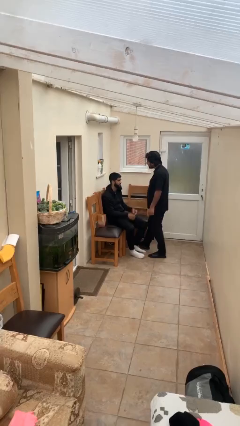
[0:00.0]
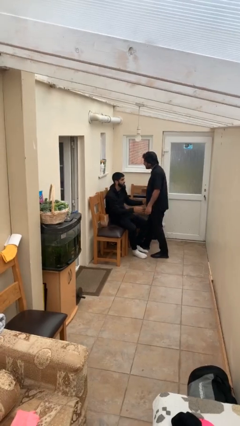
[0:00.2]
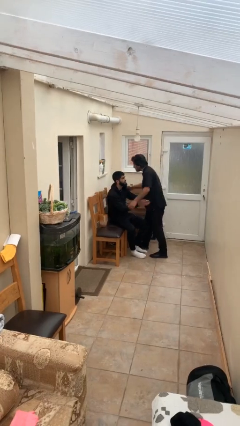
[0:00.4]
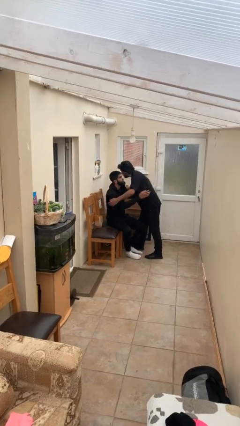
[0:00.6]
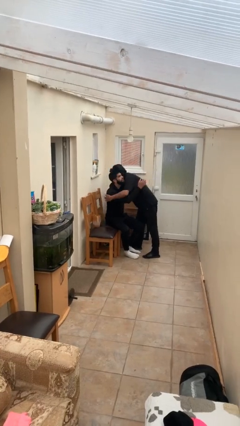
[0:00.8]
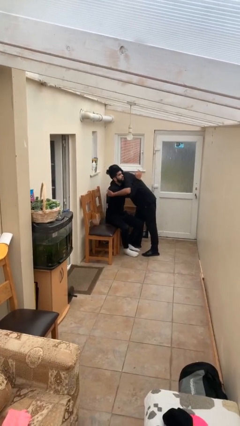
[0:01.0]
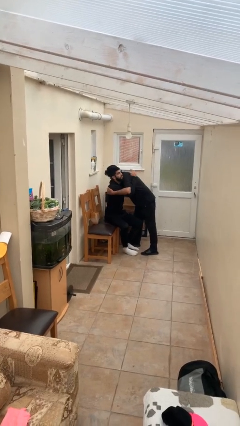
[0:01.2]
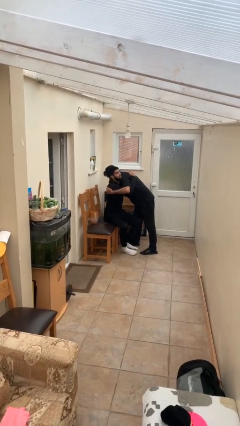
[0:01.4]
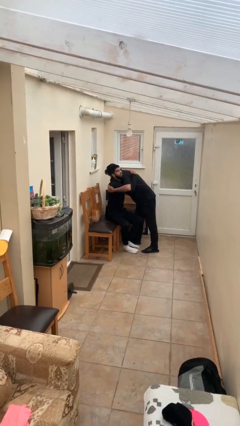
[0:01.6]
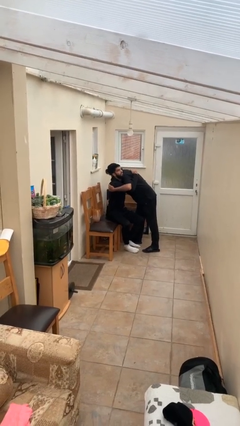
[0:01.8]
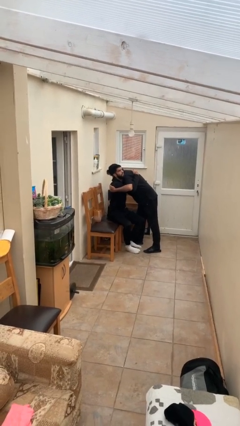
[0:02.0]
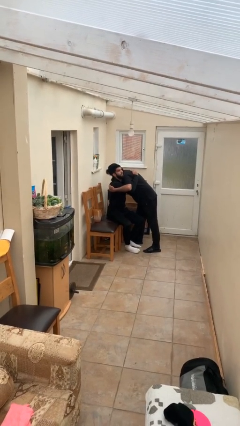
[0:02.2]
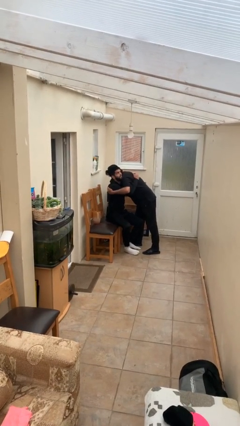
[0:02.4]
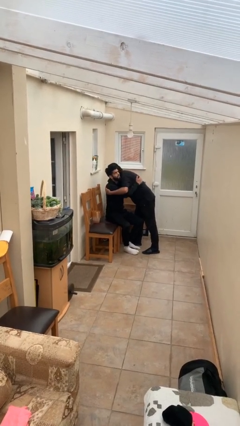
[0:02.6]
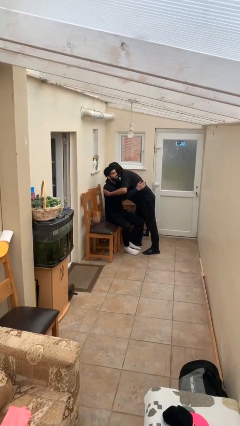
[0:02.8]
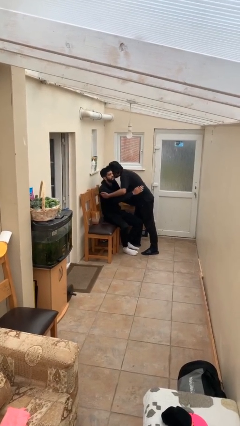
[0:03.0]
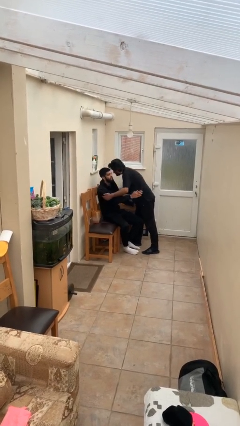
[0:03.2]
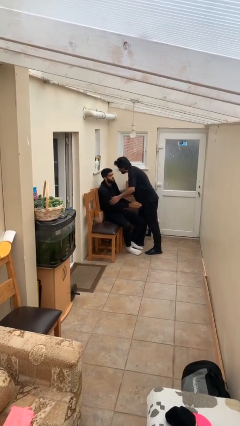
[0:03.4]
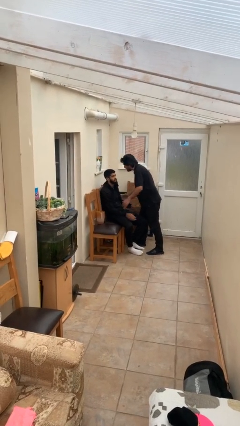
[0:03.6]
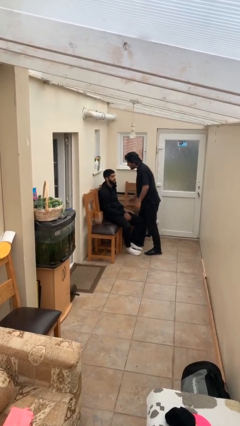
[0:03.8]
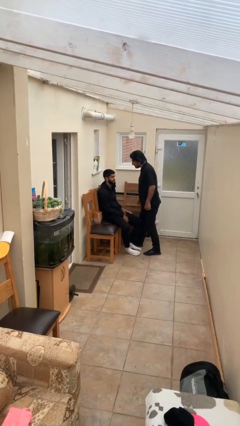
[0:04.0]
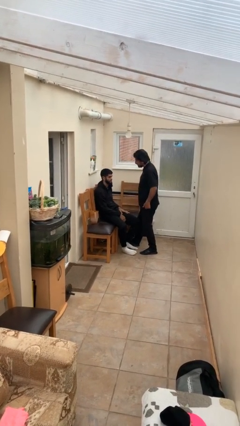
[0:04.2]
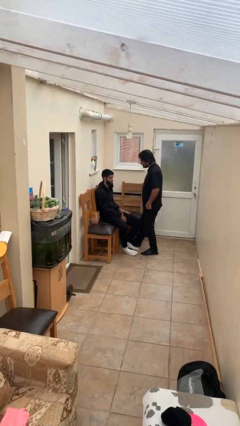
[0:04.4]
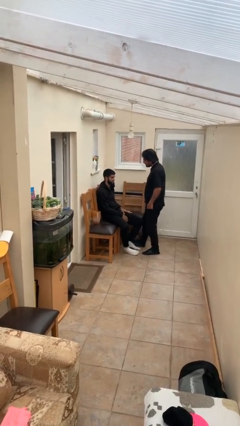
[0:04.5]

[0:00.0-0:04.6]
person embraces person

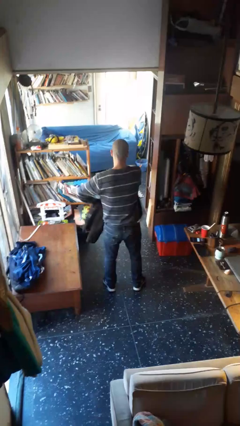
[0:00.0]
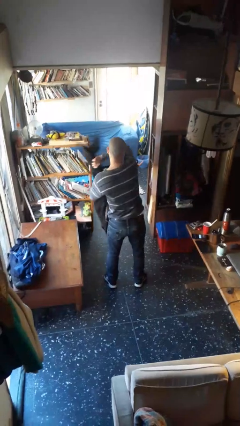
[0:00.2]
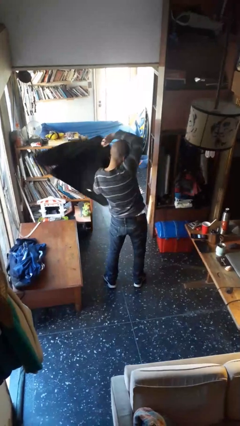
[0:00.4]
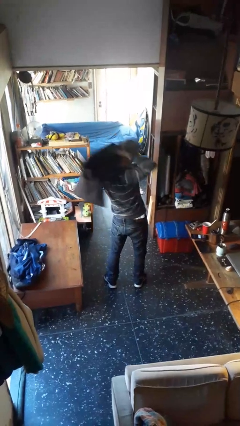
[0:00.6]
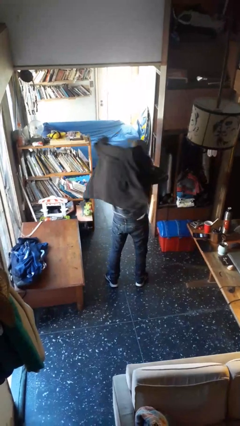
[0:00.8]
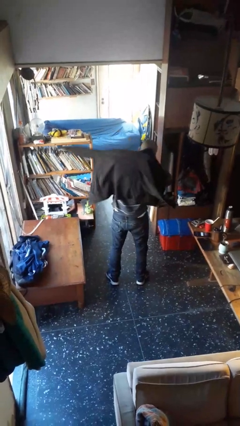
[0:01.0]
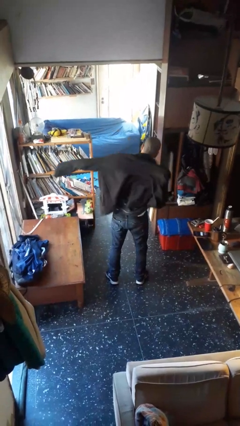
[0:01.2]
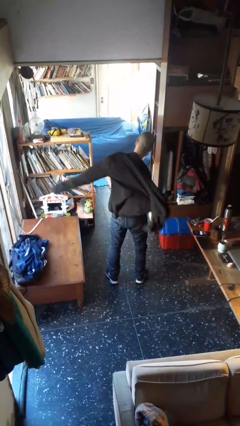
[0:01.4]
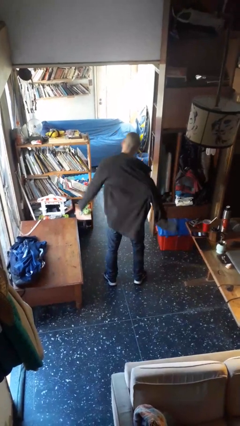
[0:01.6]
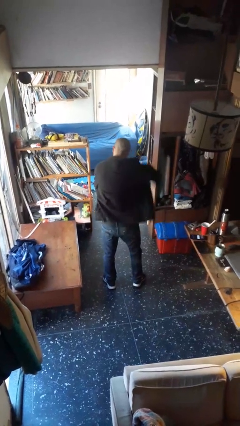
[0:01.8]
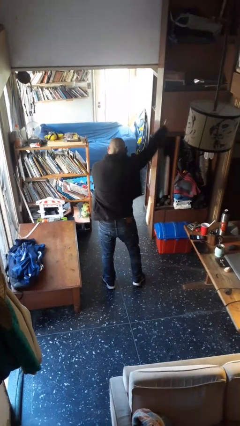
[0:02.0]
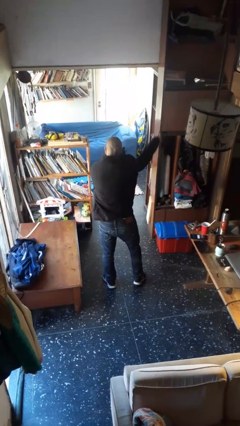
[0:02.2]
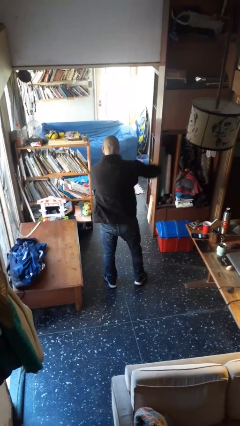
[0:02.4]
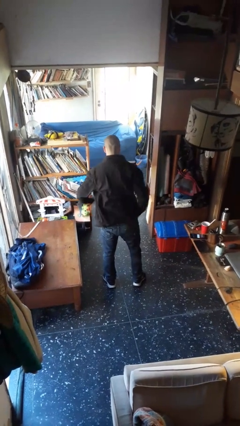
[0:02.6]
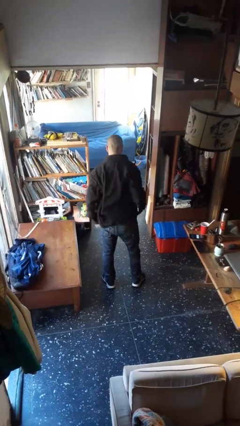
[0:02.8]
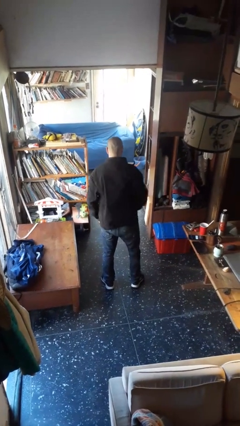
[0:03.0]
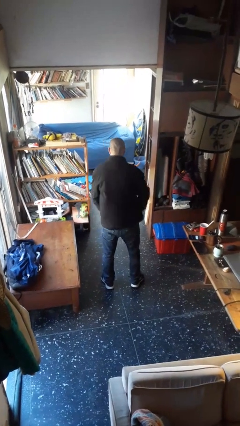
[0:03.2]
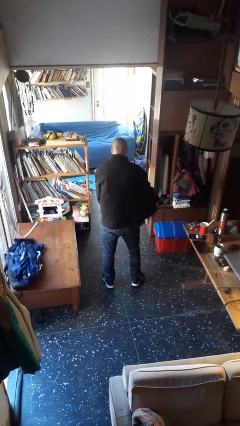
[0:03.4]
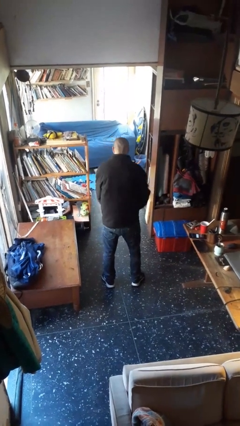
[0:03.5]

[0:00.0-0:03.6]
person puts on jacket

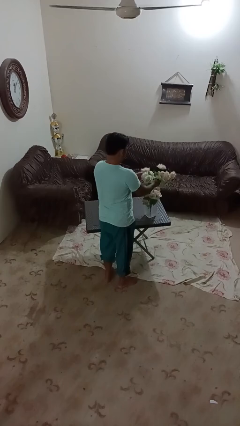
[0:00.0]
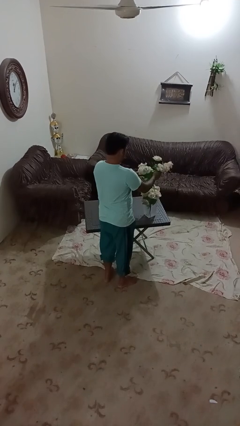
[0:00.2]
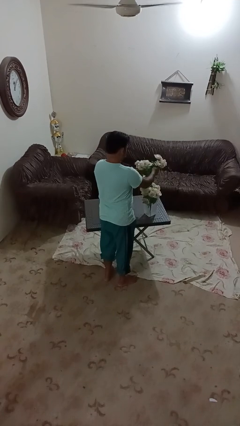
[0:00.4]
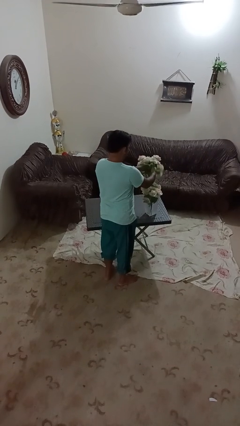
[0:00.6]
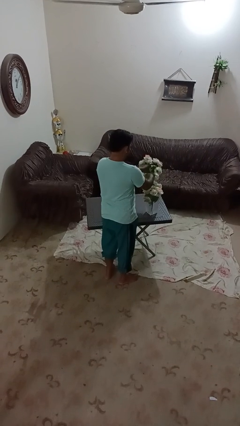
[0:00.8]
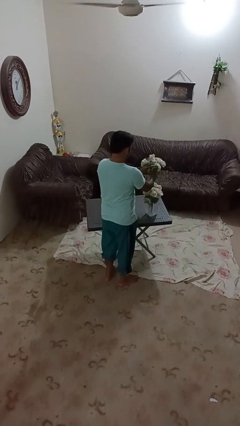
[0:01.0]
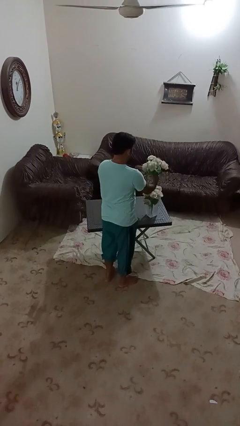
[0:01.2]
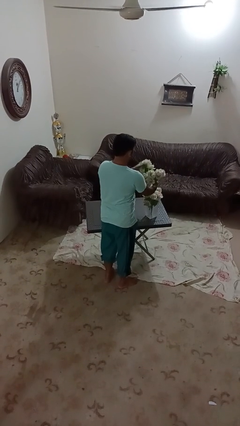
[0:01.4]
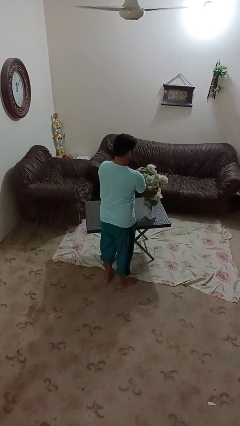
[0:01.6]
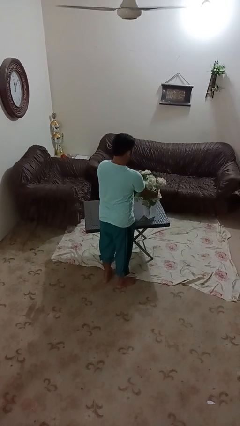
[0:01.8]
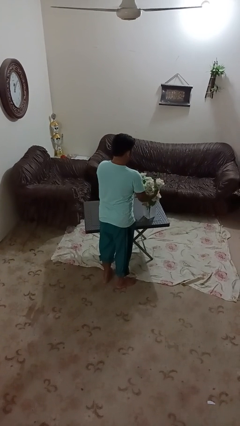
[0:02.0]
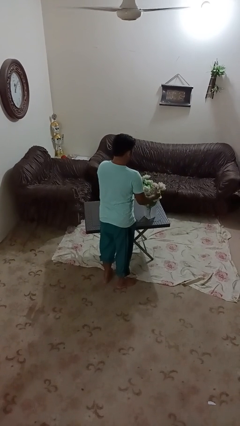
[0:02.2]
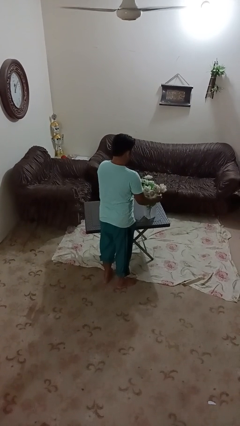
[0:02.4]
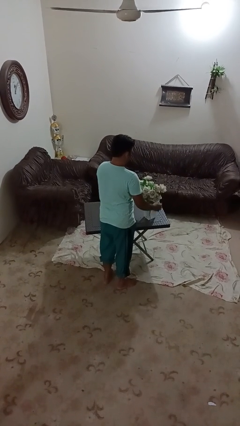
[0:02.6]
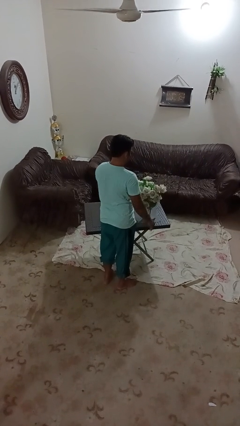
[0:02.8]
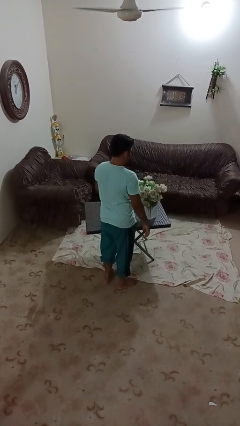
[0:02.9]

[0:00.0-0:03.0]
person arranges flowers in vase

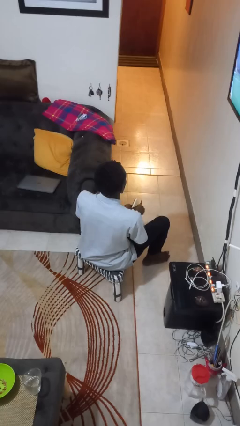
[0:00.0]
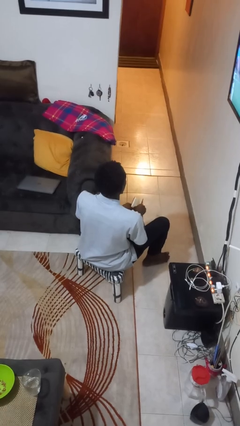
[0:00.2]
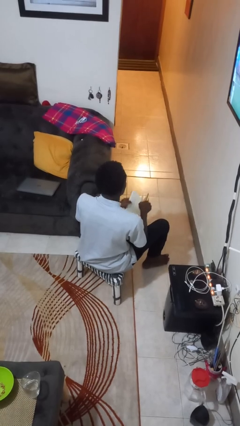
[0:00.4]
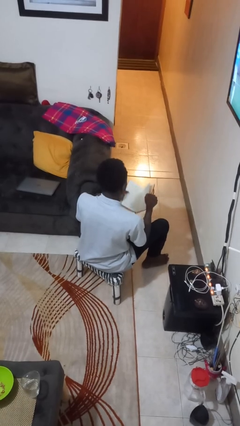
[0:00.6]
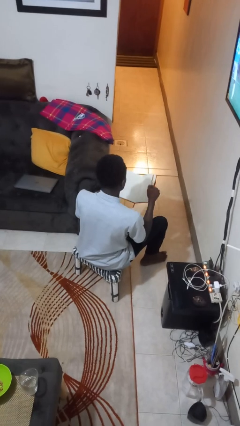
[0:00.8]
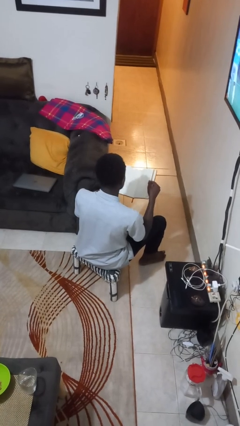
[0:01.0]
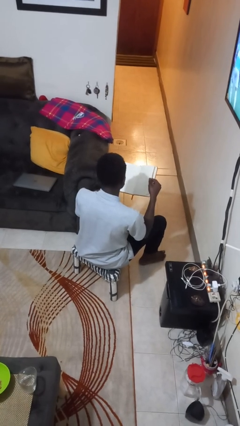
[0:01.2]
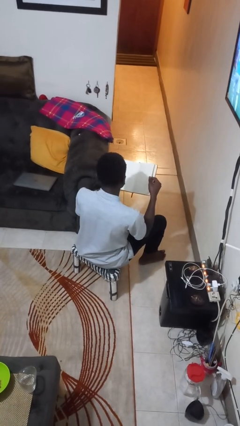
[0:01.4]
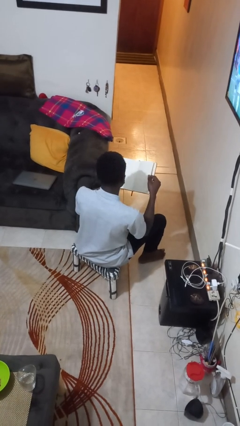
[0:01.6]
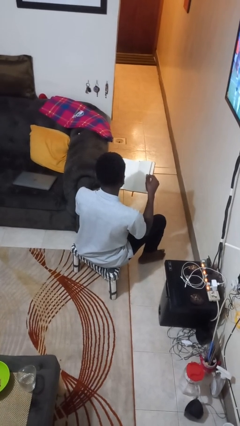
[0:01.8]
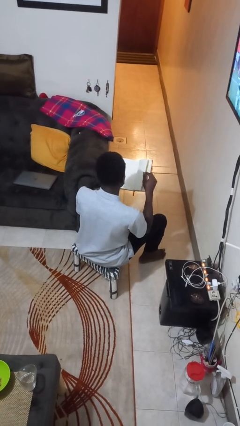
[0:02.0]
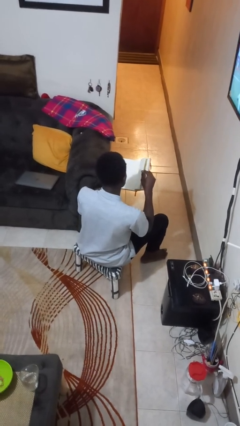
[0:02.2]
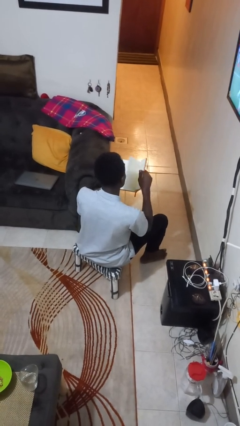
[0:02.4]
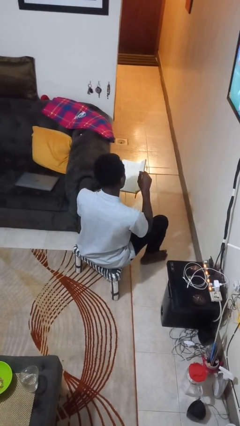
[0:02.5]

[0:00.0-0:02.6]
person reads book

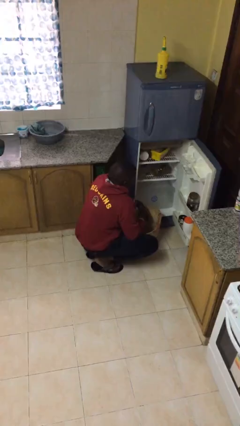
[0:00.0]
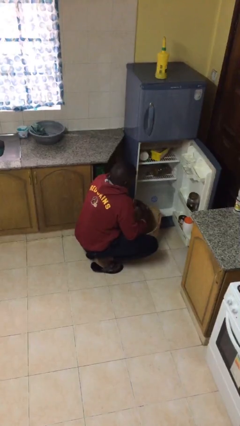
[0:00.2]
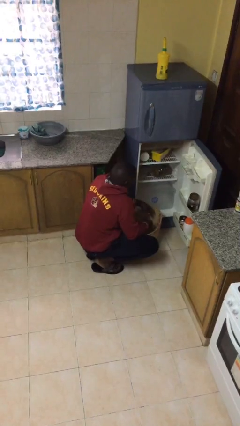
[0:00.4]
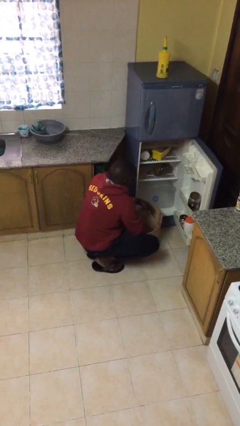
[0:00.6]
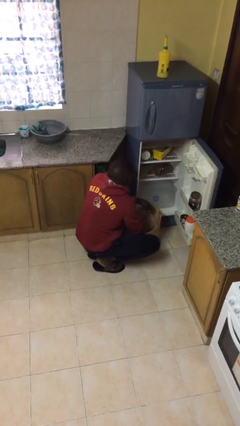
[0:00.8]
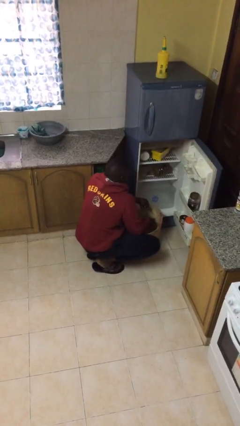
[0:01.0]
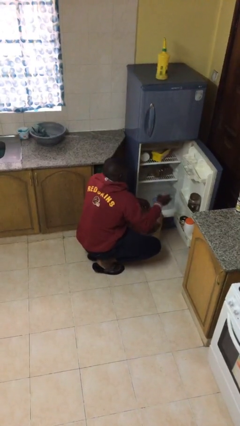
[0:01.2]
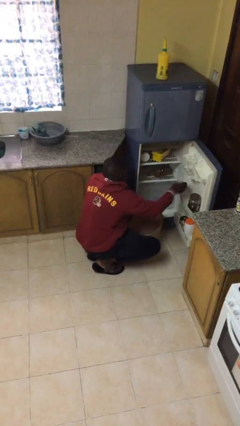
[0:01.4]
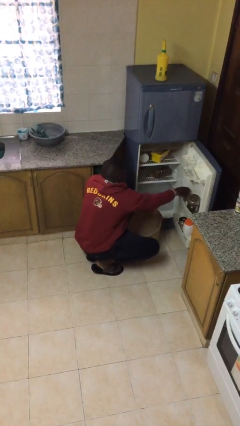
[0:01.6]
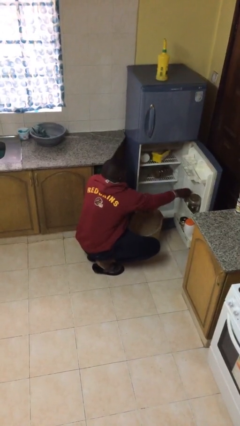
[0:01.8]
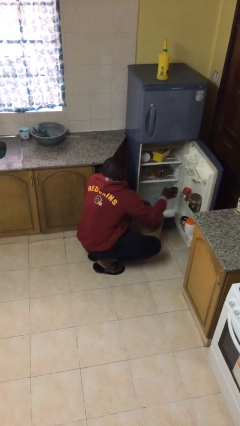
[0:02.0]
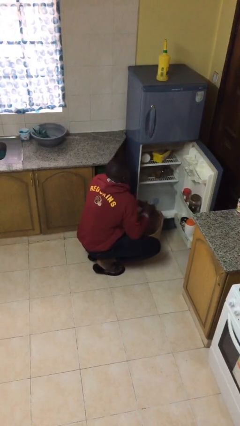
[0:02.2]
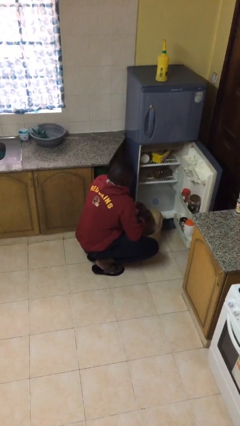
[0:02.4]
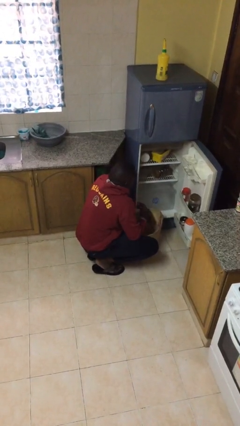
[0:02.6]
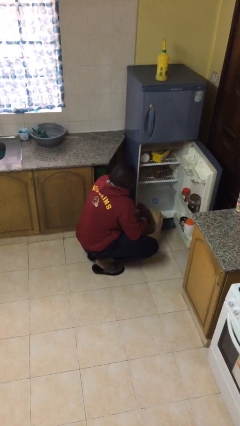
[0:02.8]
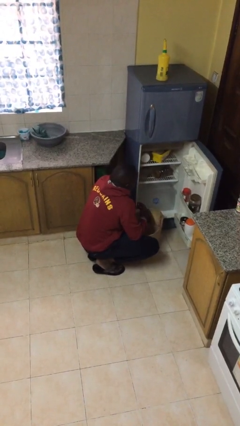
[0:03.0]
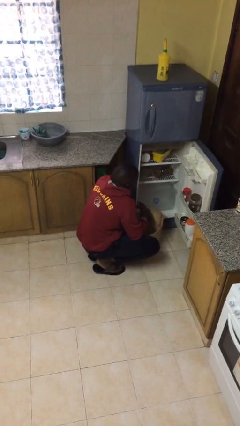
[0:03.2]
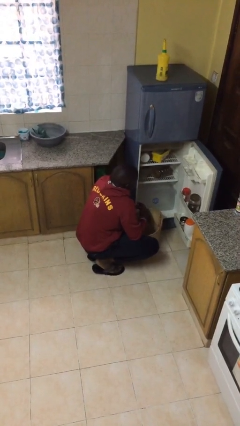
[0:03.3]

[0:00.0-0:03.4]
person loads groceries into refrigerator

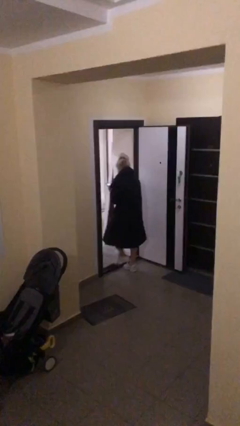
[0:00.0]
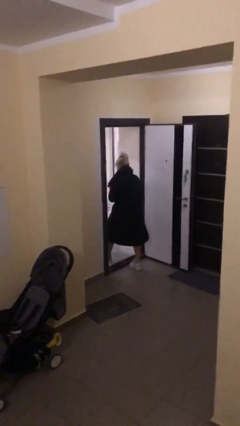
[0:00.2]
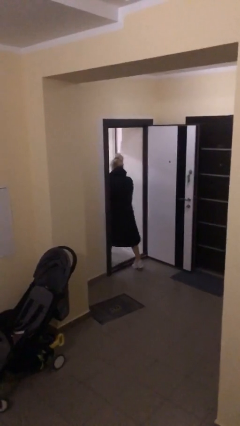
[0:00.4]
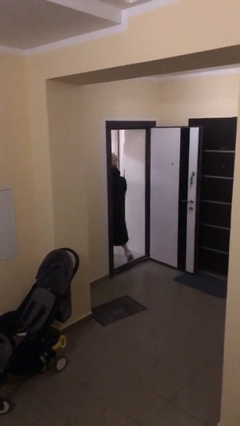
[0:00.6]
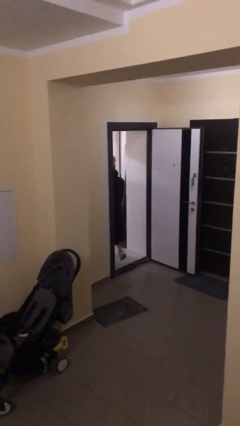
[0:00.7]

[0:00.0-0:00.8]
person exits scene through structure
